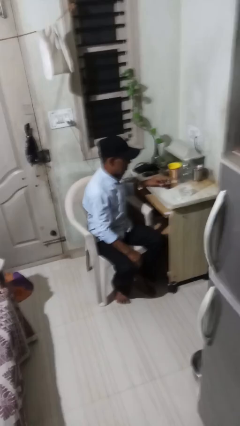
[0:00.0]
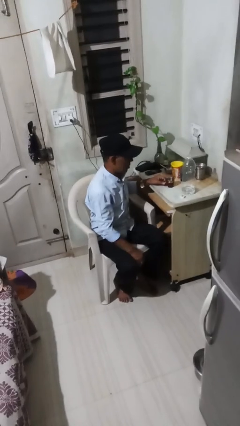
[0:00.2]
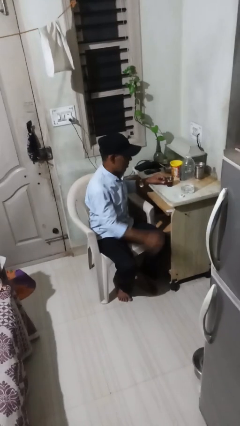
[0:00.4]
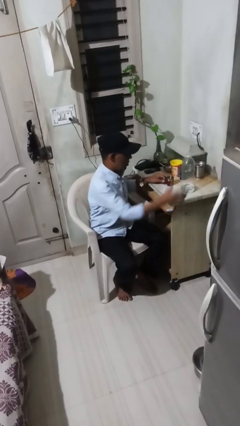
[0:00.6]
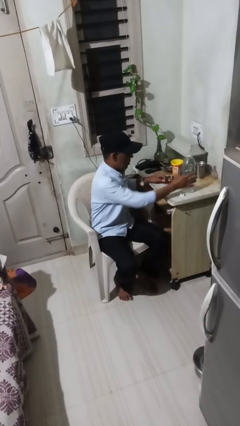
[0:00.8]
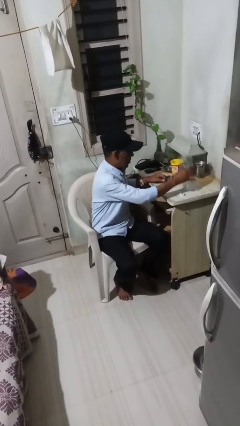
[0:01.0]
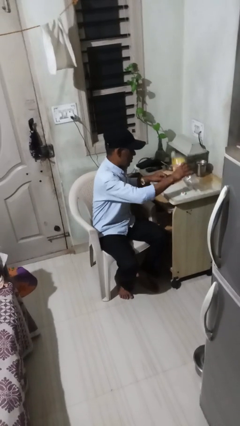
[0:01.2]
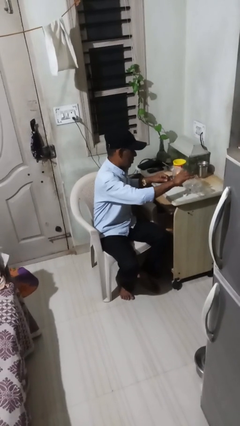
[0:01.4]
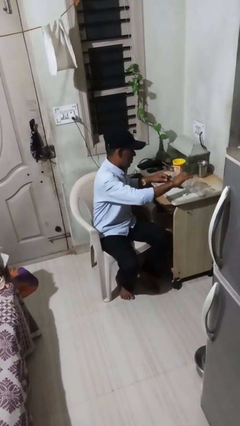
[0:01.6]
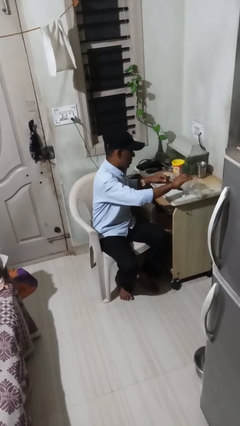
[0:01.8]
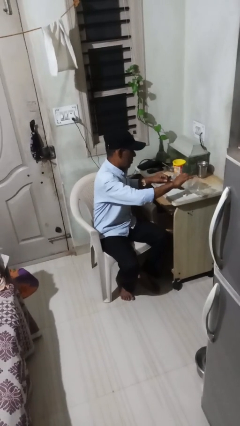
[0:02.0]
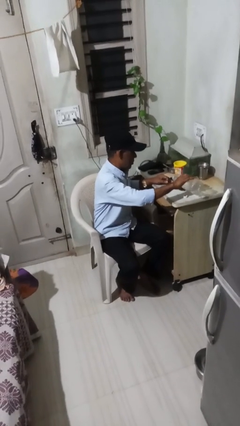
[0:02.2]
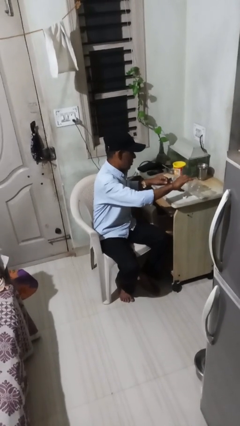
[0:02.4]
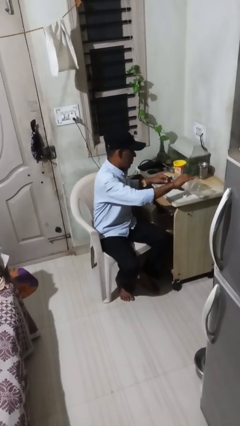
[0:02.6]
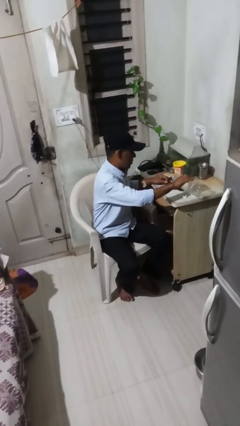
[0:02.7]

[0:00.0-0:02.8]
person pours liquid into cup

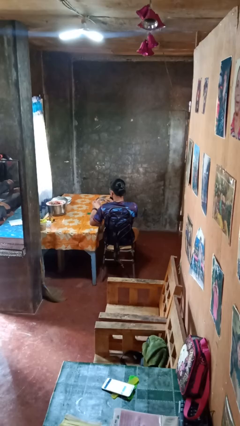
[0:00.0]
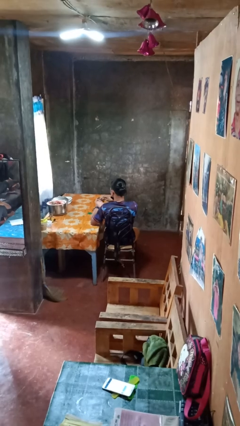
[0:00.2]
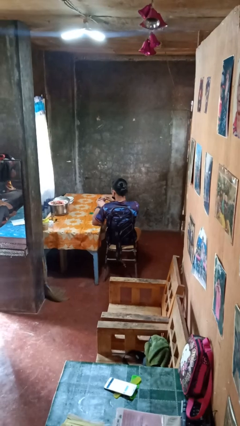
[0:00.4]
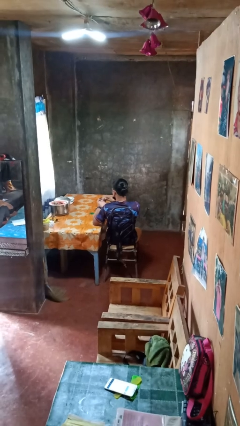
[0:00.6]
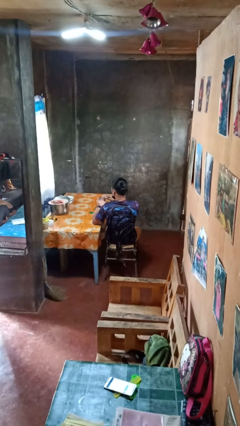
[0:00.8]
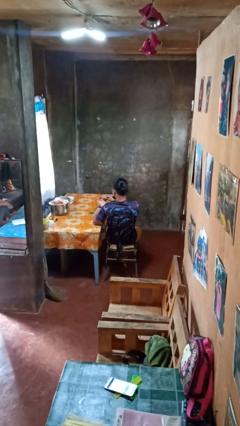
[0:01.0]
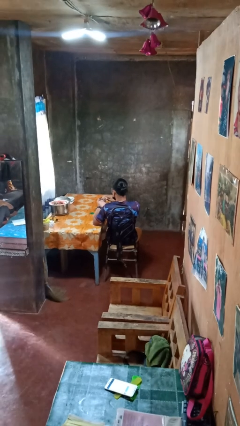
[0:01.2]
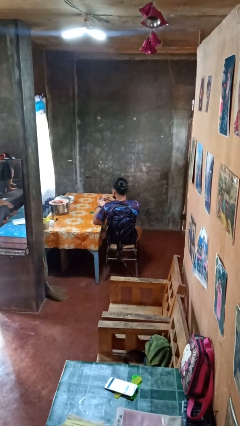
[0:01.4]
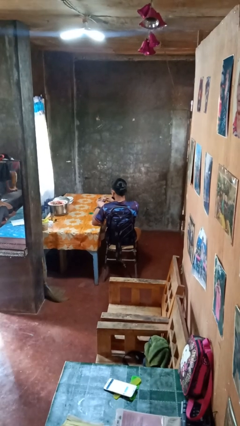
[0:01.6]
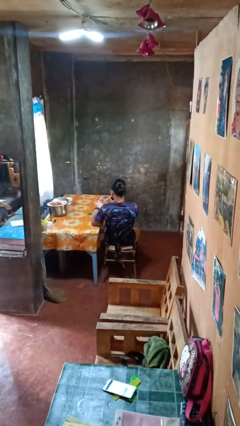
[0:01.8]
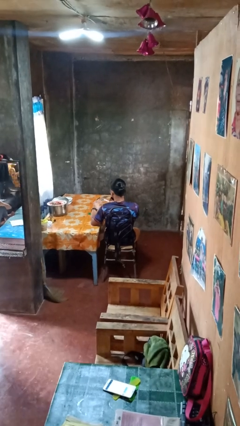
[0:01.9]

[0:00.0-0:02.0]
person files fingernails

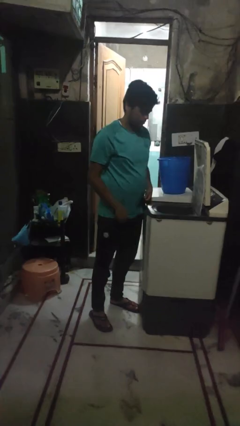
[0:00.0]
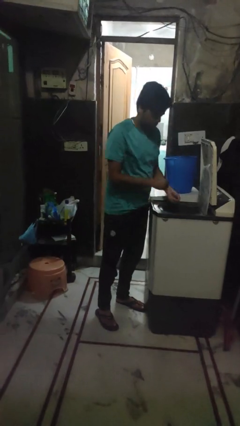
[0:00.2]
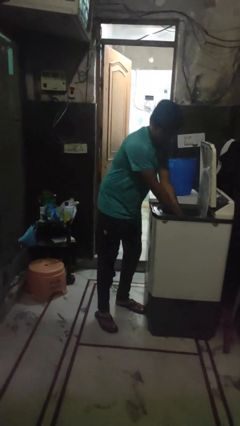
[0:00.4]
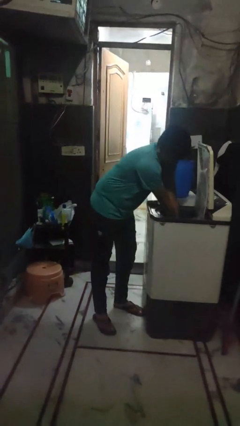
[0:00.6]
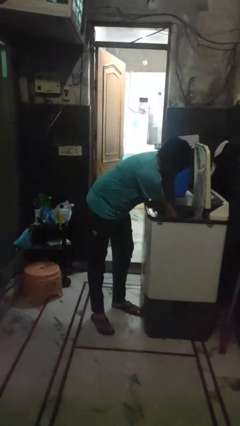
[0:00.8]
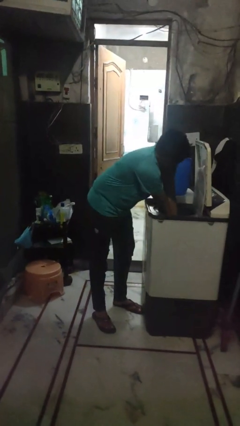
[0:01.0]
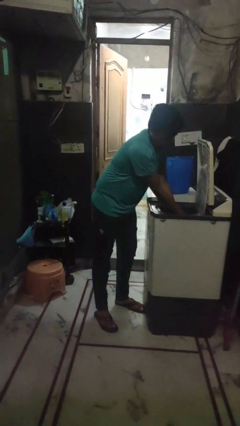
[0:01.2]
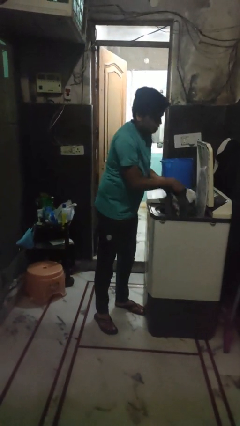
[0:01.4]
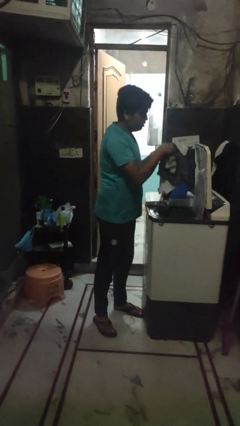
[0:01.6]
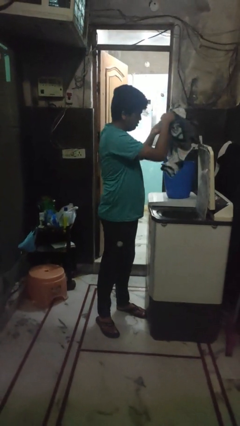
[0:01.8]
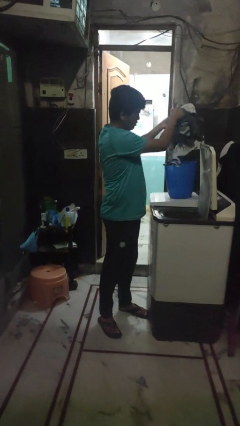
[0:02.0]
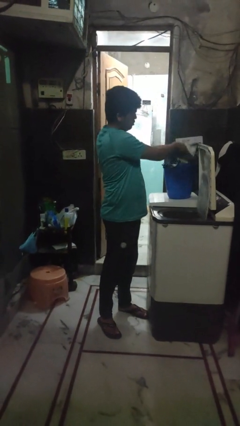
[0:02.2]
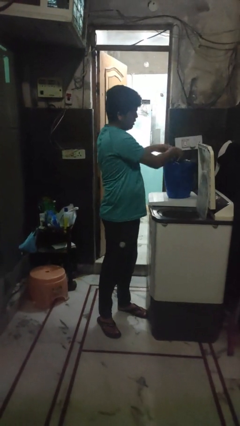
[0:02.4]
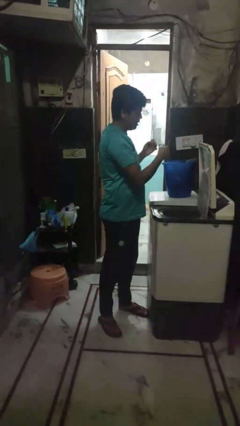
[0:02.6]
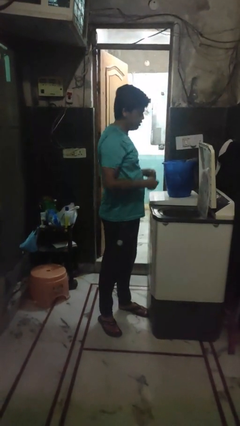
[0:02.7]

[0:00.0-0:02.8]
person unloads clotheswasher

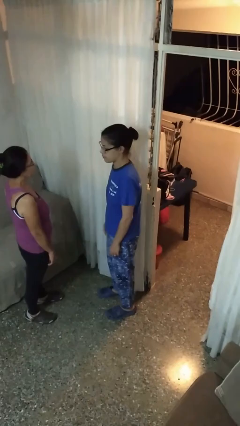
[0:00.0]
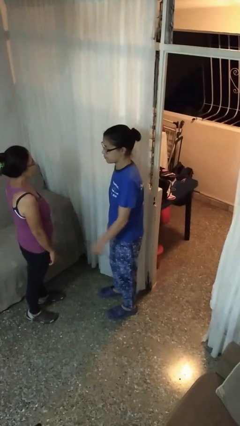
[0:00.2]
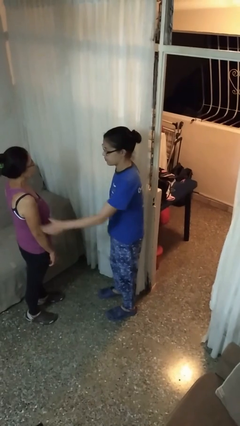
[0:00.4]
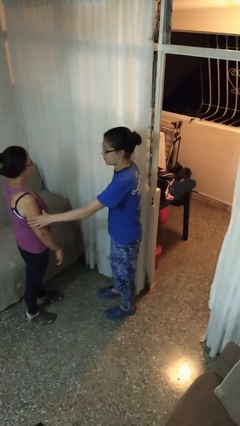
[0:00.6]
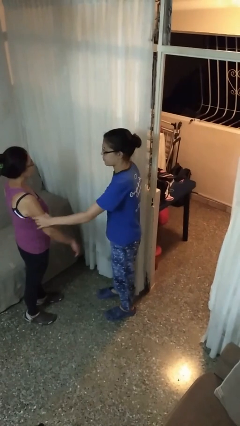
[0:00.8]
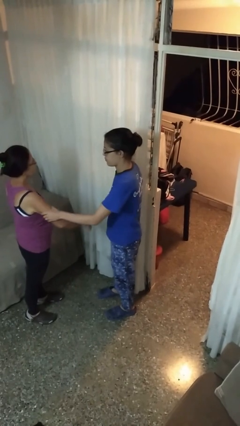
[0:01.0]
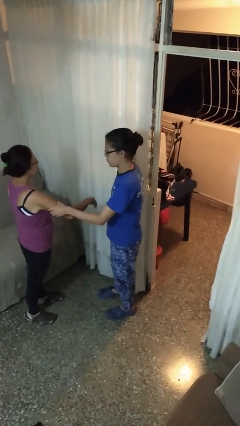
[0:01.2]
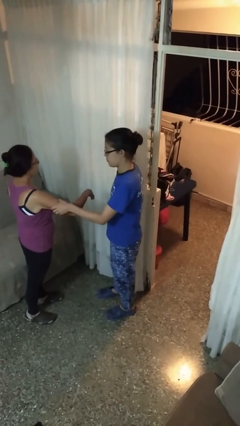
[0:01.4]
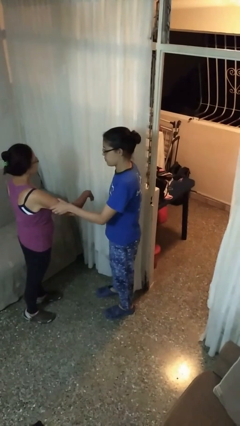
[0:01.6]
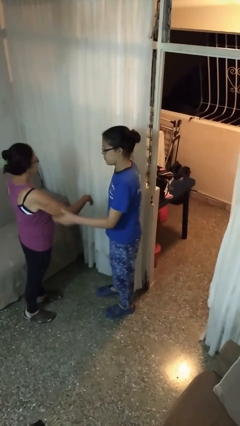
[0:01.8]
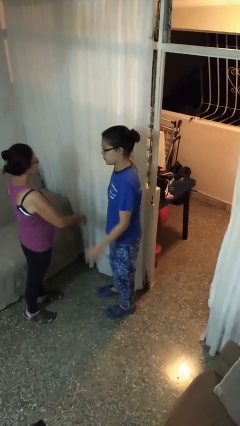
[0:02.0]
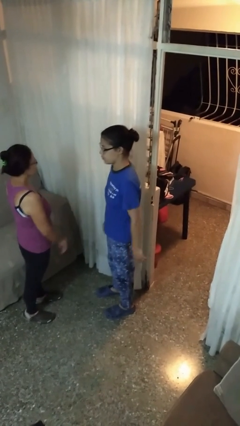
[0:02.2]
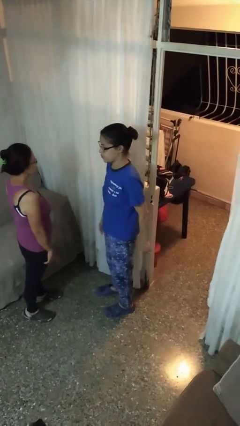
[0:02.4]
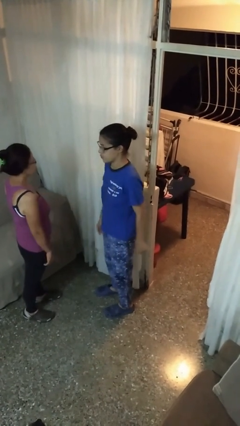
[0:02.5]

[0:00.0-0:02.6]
person grabs person by bicep

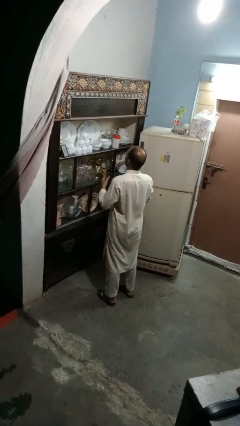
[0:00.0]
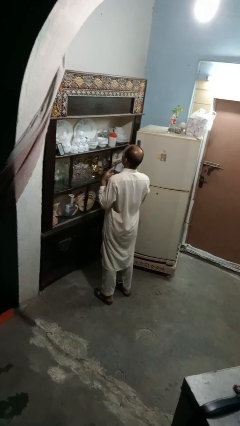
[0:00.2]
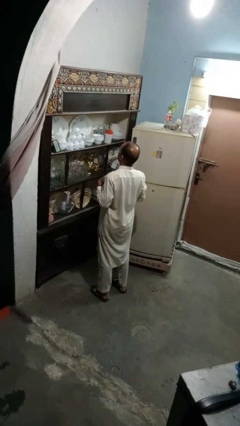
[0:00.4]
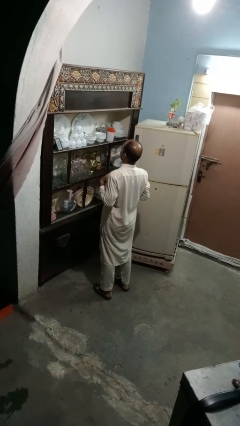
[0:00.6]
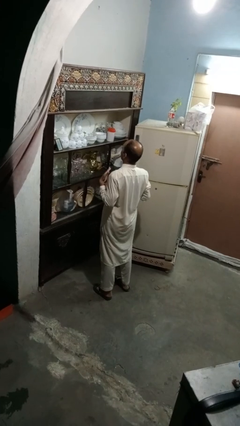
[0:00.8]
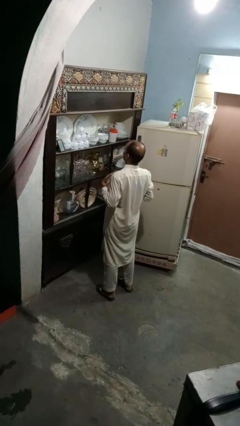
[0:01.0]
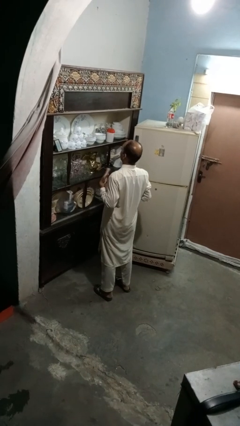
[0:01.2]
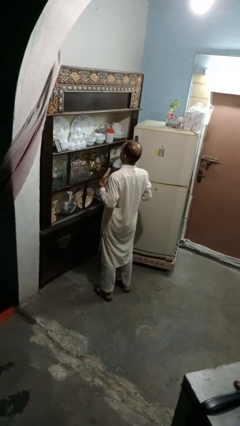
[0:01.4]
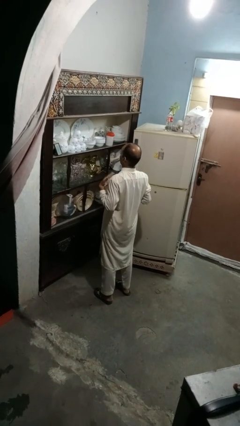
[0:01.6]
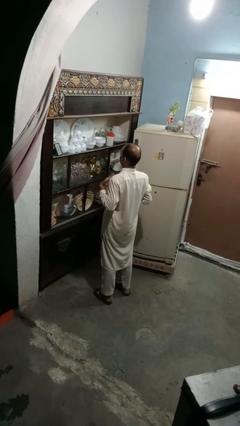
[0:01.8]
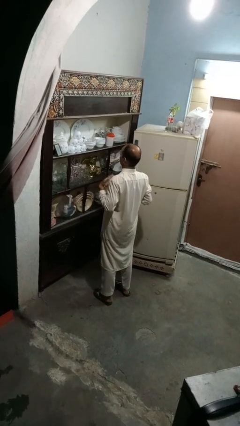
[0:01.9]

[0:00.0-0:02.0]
person drums on chest

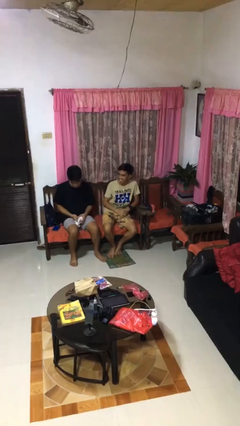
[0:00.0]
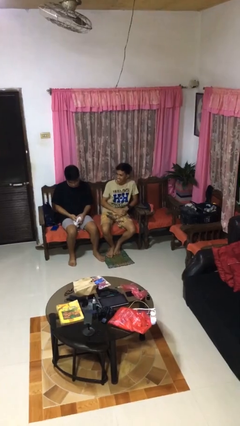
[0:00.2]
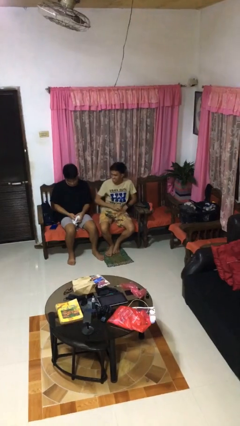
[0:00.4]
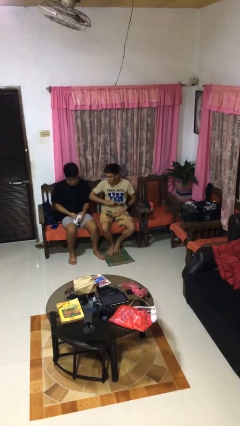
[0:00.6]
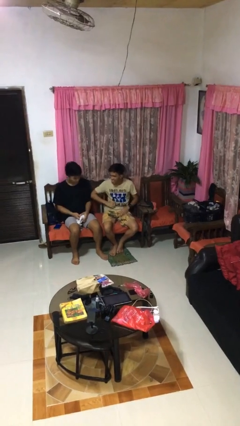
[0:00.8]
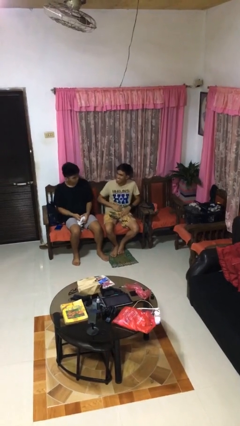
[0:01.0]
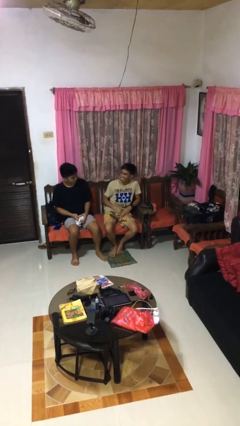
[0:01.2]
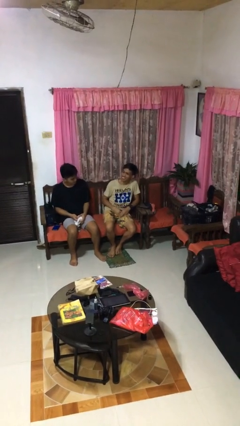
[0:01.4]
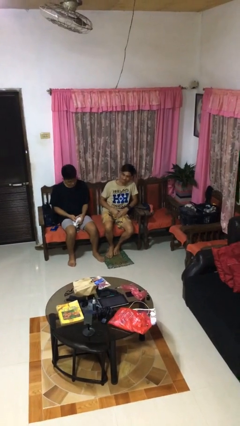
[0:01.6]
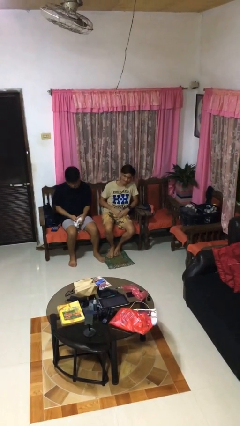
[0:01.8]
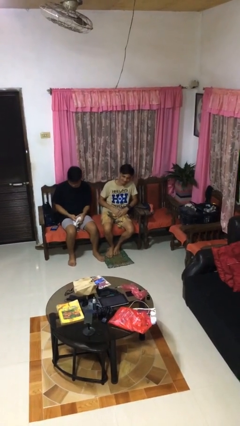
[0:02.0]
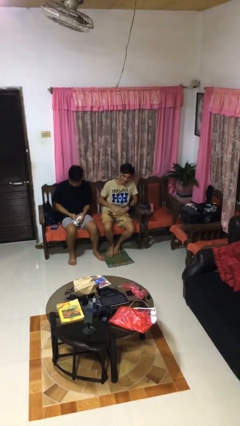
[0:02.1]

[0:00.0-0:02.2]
person nudges person with elbow

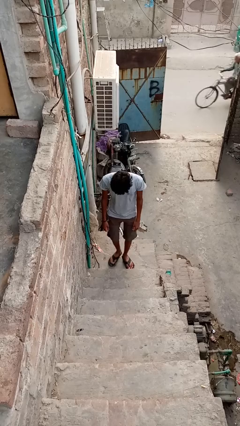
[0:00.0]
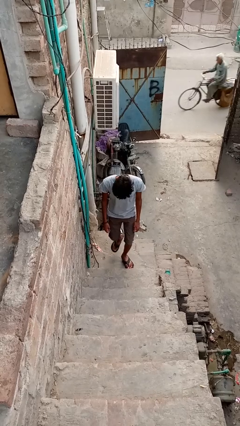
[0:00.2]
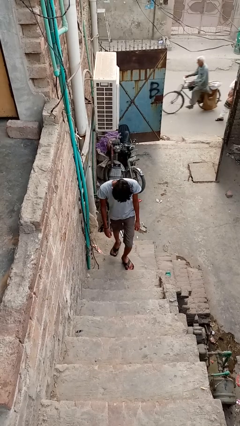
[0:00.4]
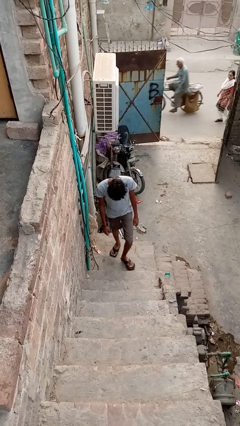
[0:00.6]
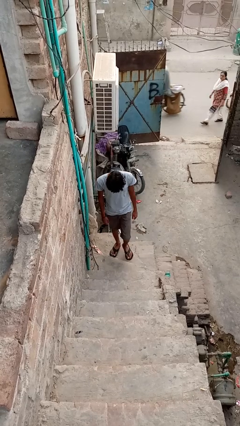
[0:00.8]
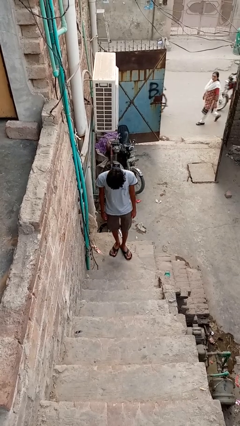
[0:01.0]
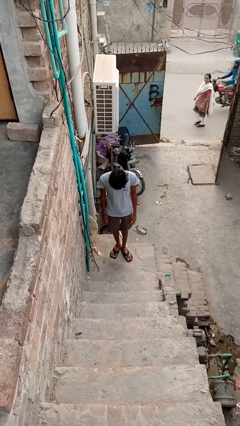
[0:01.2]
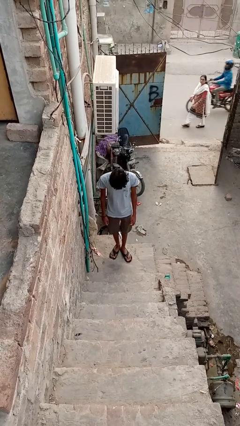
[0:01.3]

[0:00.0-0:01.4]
person climbs down stairs

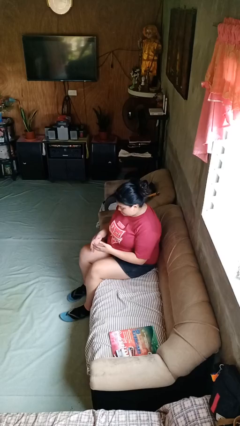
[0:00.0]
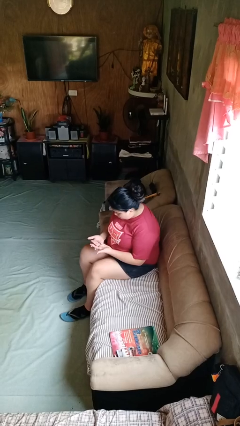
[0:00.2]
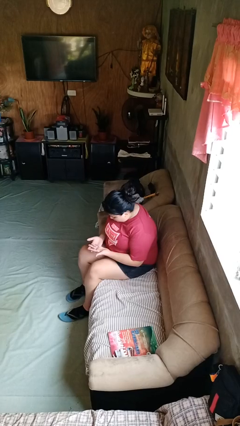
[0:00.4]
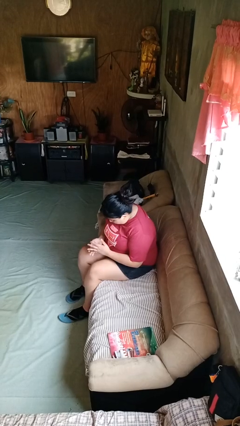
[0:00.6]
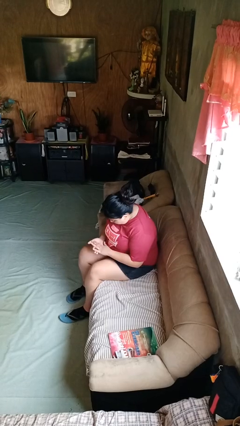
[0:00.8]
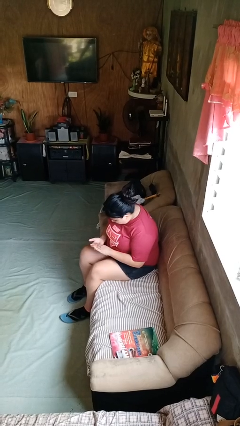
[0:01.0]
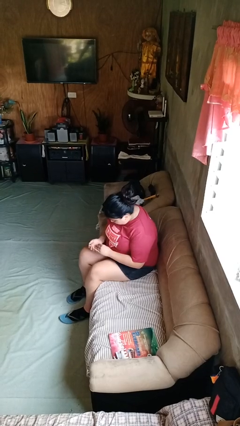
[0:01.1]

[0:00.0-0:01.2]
person looks at hands in lap
